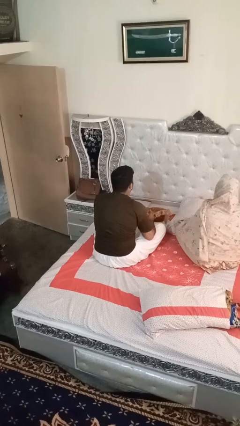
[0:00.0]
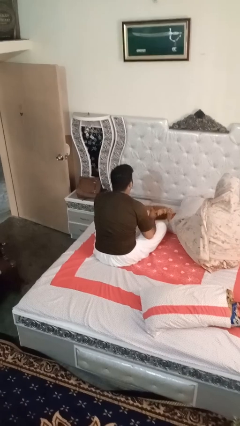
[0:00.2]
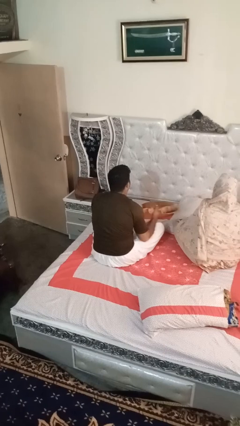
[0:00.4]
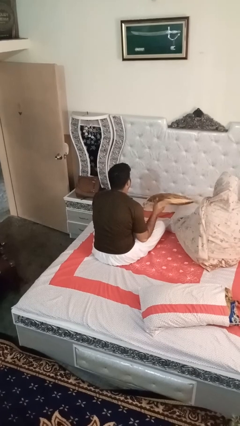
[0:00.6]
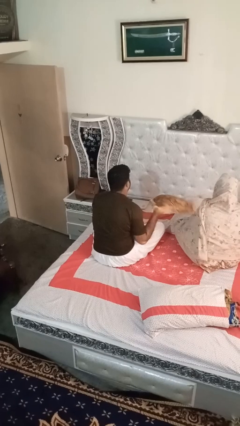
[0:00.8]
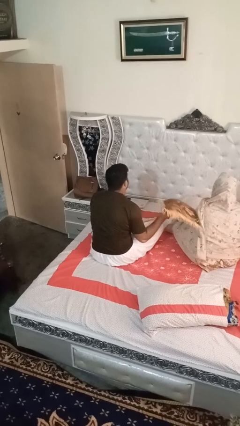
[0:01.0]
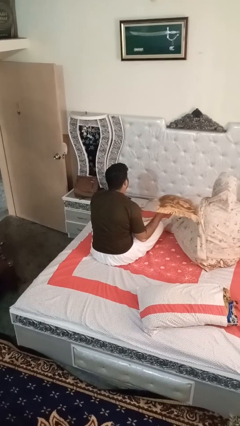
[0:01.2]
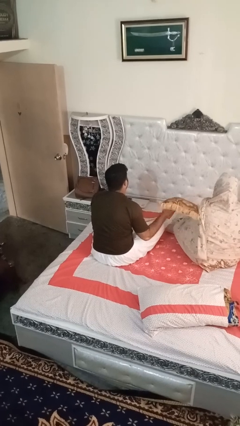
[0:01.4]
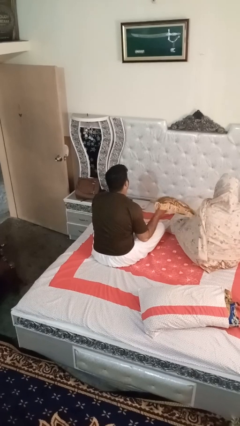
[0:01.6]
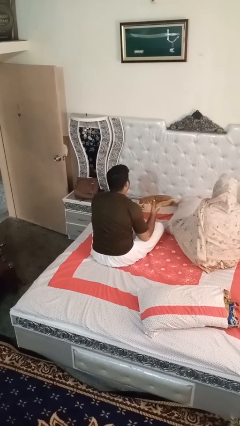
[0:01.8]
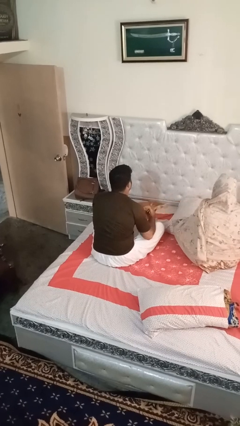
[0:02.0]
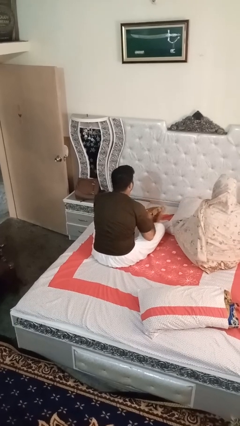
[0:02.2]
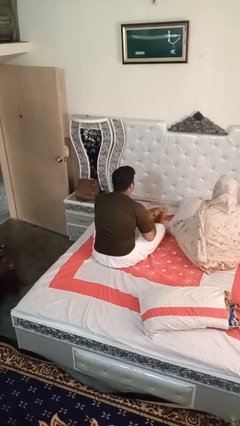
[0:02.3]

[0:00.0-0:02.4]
person hits person with pillow

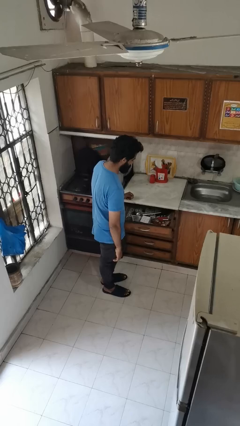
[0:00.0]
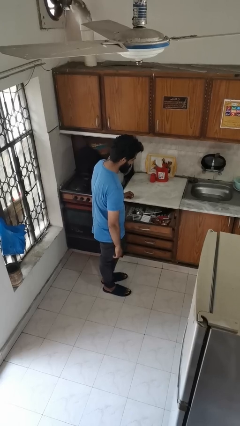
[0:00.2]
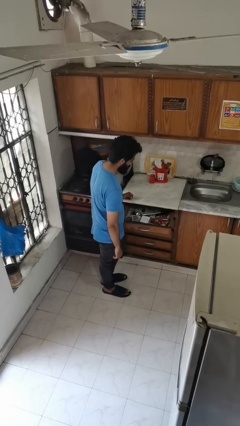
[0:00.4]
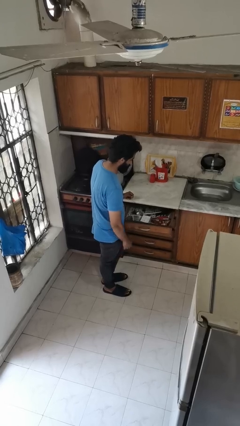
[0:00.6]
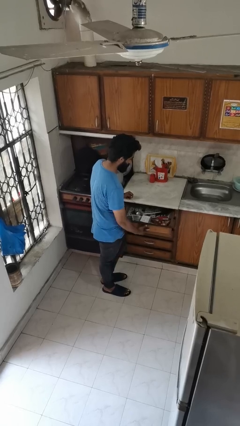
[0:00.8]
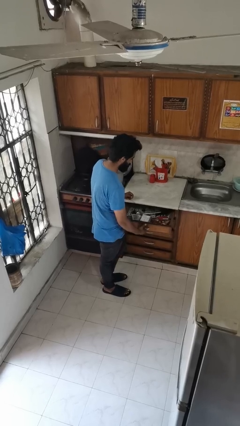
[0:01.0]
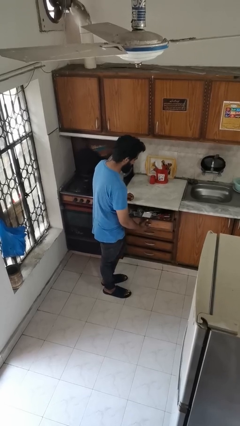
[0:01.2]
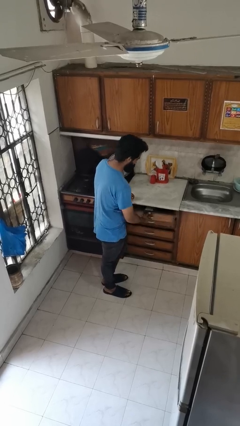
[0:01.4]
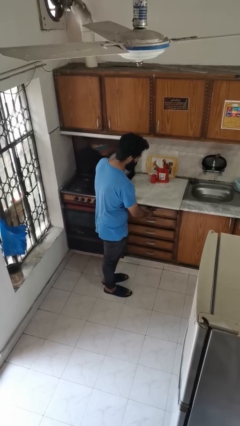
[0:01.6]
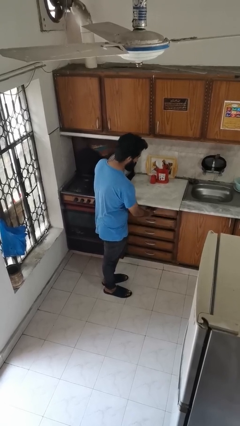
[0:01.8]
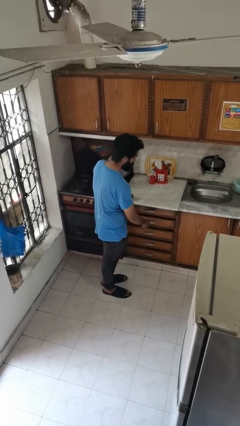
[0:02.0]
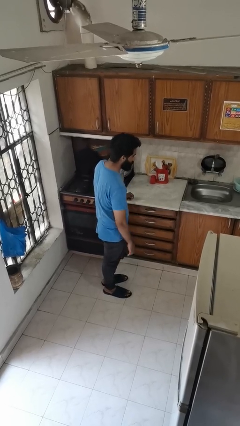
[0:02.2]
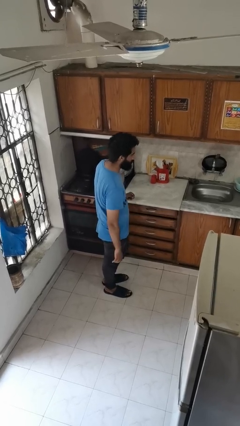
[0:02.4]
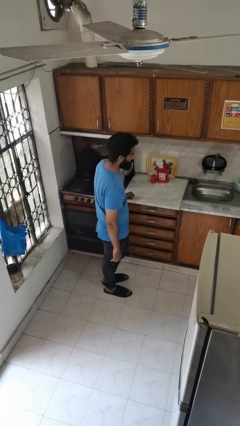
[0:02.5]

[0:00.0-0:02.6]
person closes kitchen drawer

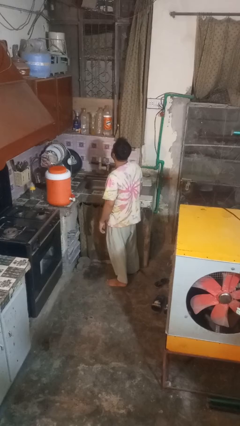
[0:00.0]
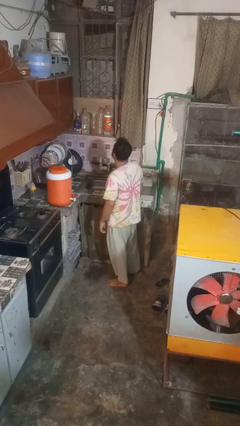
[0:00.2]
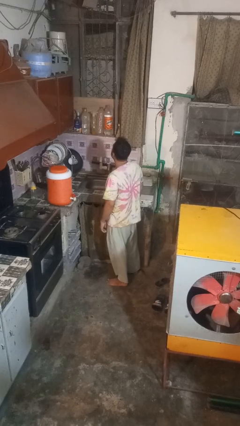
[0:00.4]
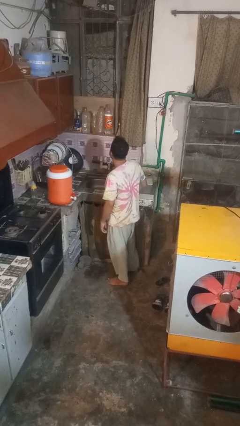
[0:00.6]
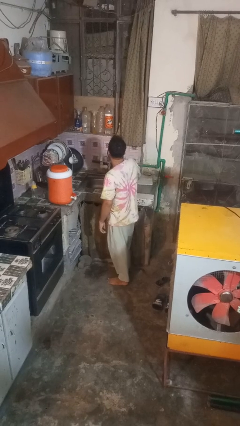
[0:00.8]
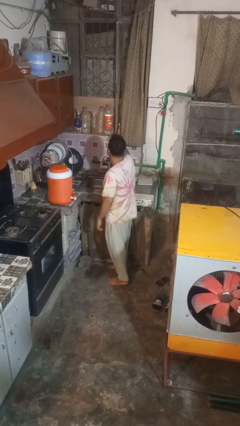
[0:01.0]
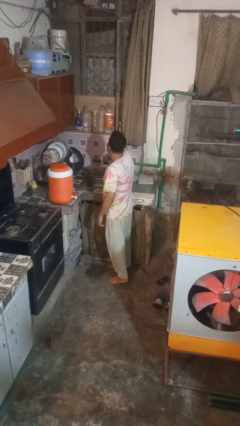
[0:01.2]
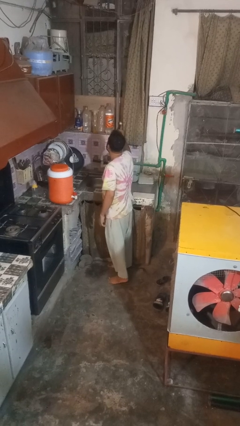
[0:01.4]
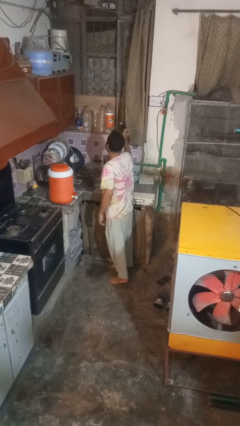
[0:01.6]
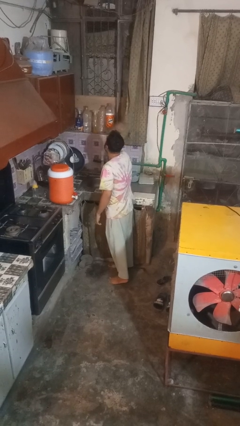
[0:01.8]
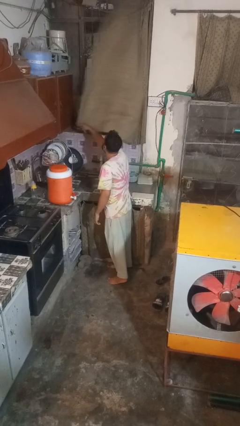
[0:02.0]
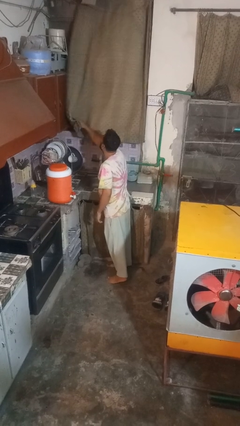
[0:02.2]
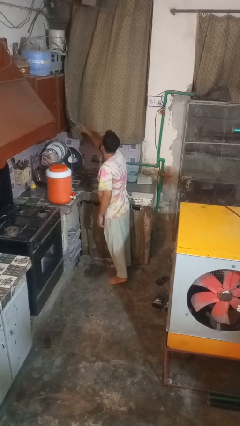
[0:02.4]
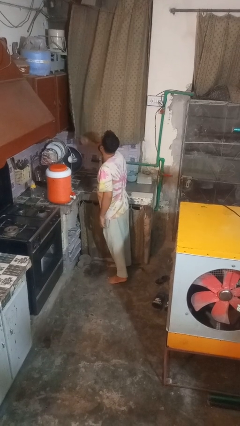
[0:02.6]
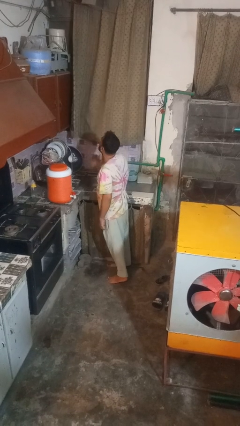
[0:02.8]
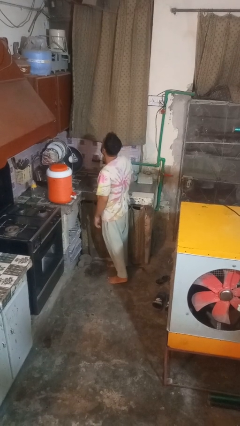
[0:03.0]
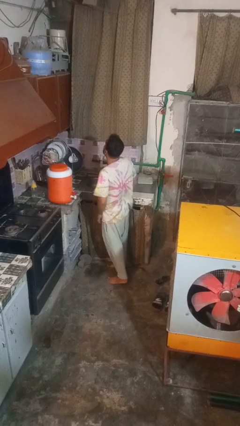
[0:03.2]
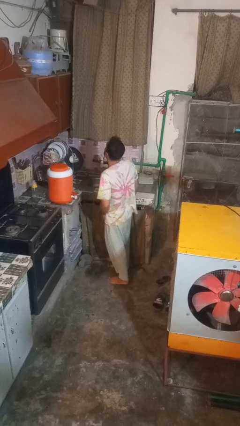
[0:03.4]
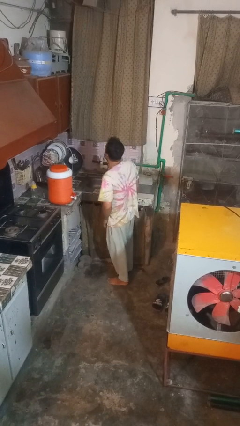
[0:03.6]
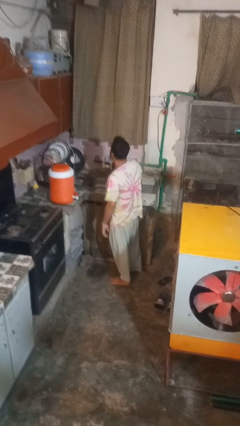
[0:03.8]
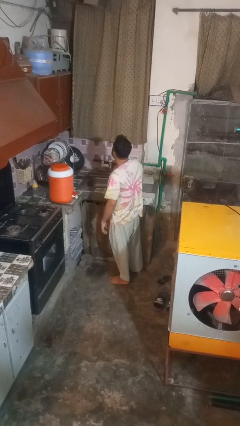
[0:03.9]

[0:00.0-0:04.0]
person closes curtains

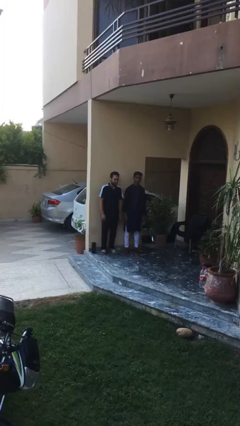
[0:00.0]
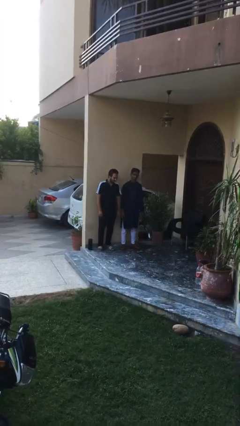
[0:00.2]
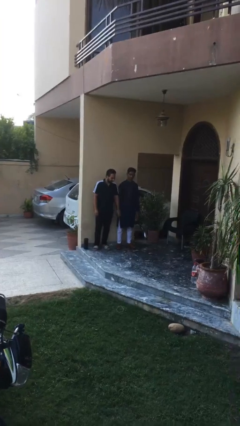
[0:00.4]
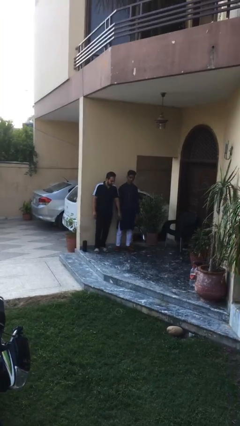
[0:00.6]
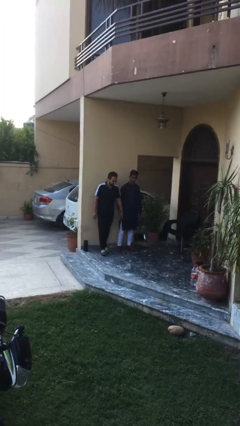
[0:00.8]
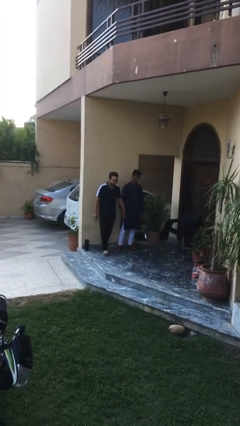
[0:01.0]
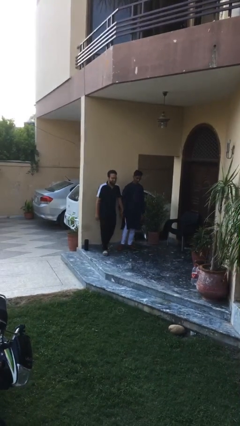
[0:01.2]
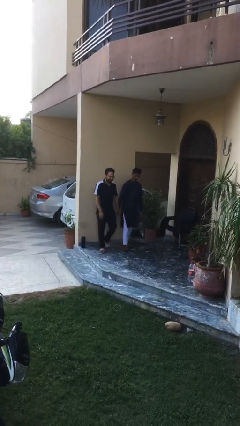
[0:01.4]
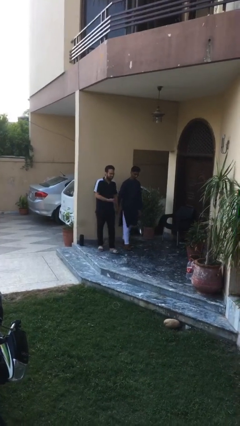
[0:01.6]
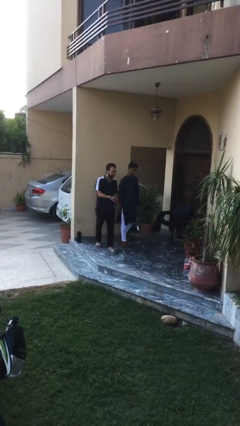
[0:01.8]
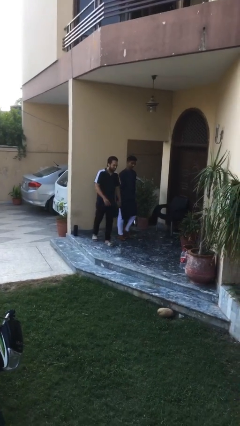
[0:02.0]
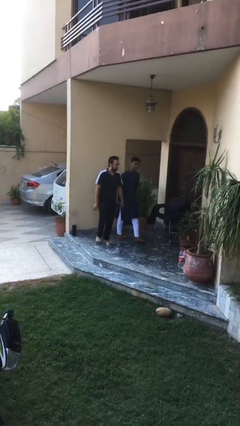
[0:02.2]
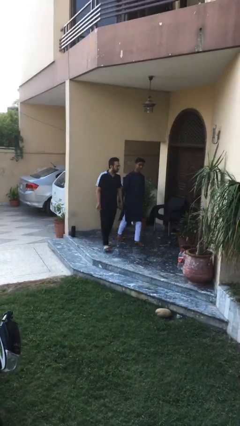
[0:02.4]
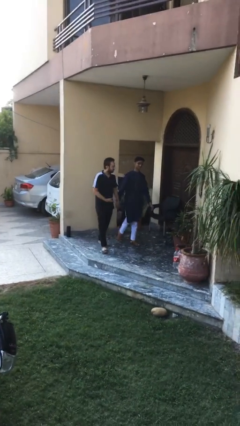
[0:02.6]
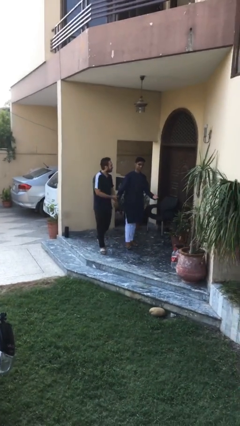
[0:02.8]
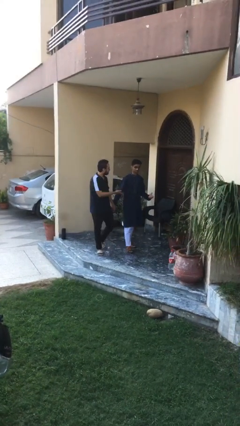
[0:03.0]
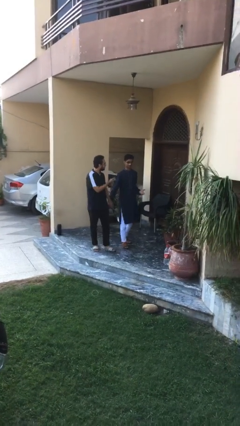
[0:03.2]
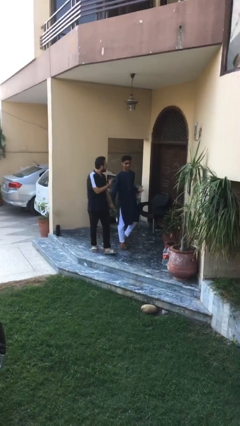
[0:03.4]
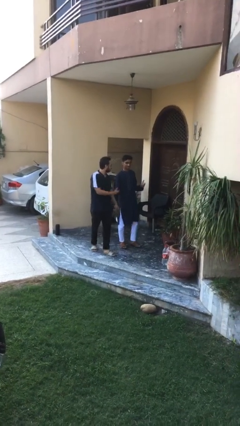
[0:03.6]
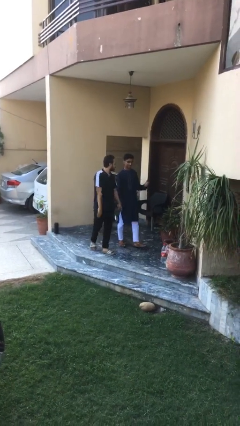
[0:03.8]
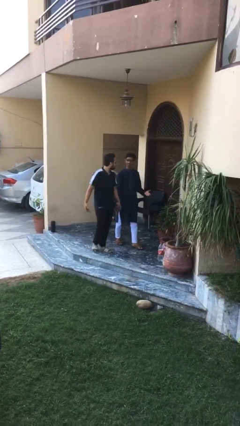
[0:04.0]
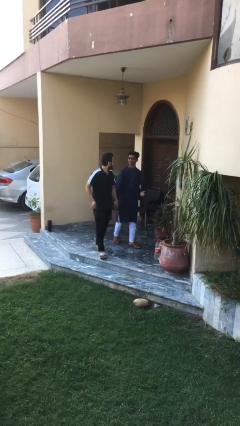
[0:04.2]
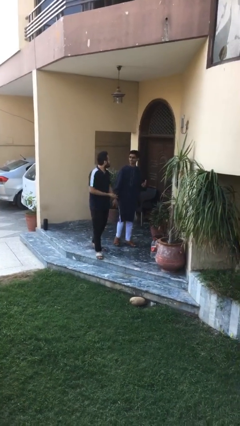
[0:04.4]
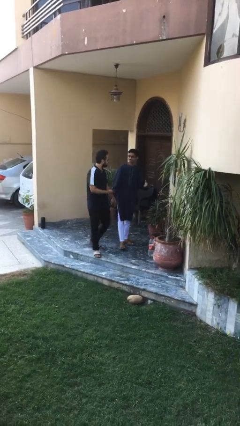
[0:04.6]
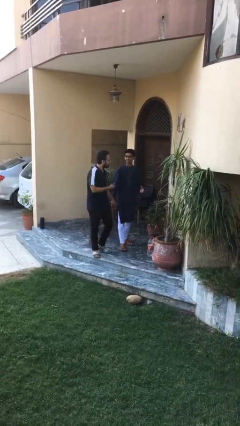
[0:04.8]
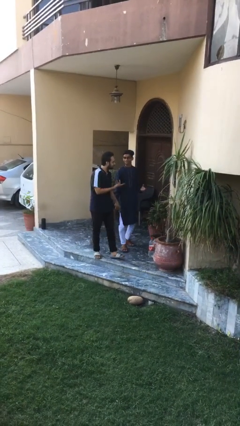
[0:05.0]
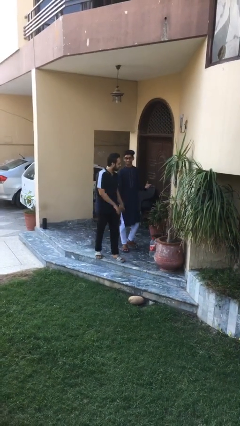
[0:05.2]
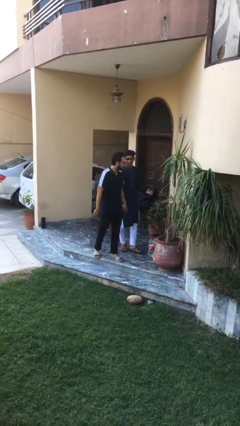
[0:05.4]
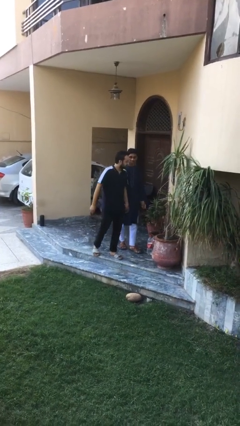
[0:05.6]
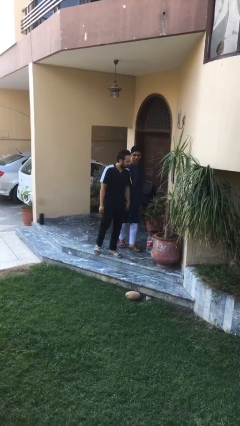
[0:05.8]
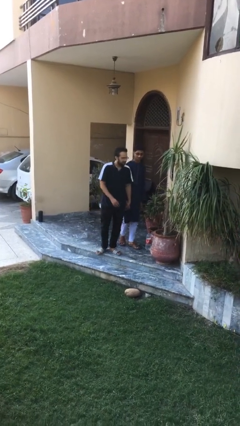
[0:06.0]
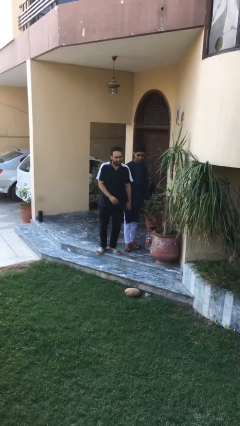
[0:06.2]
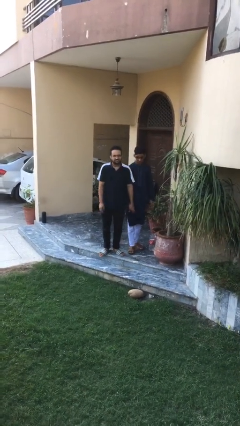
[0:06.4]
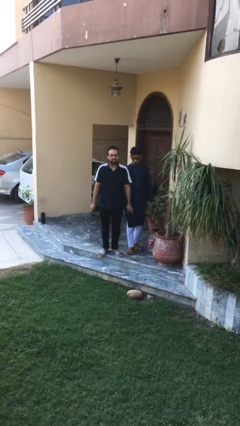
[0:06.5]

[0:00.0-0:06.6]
person holds hand

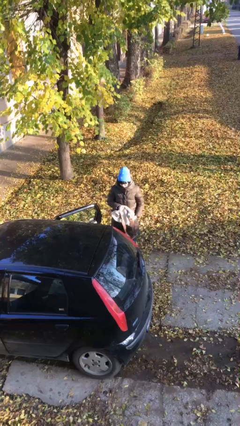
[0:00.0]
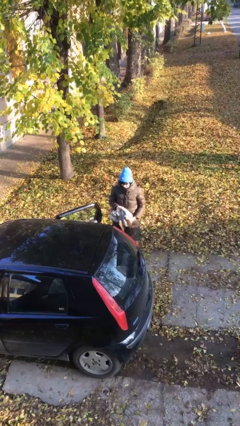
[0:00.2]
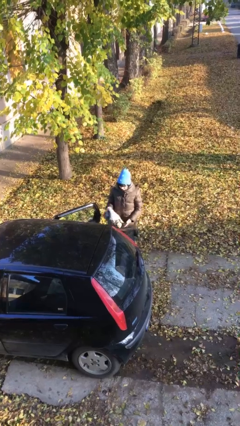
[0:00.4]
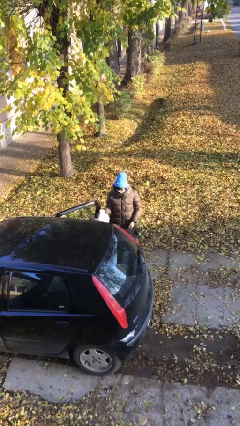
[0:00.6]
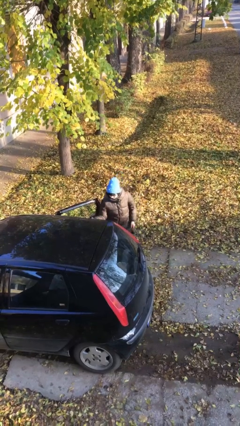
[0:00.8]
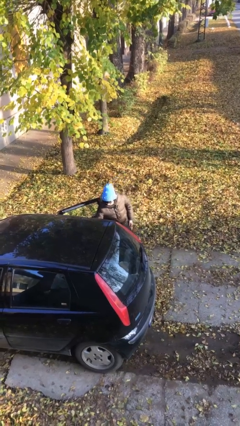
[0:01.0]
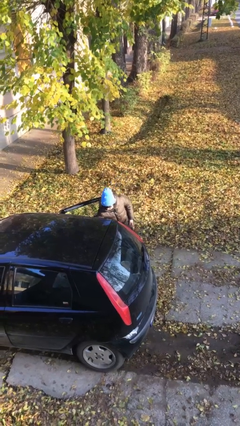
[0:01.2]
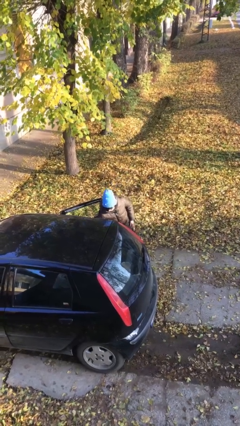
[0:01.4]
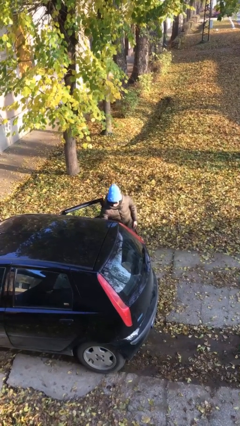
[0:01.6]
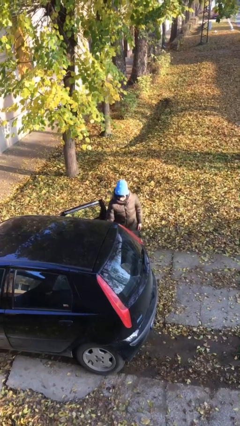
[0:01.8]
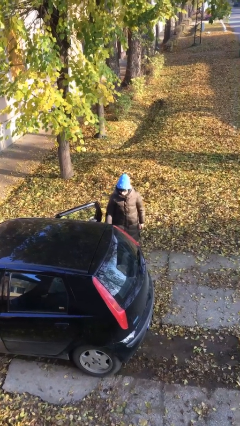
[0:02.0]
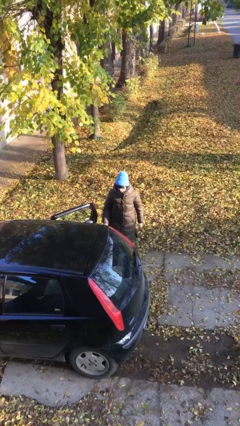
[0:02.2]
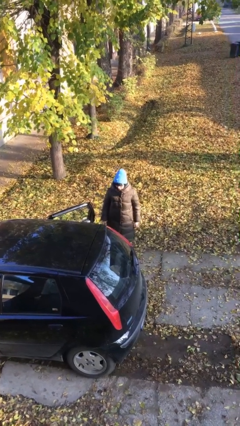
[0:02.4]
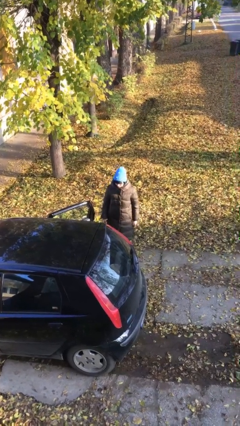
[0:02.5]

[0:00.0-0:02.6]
person loads car
